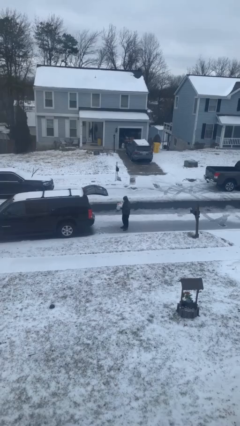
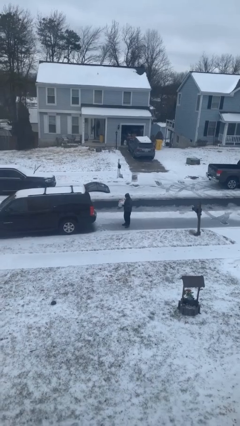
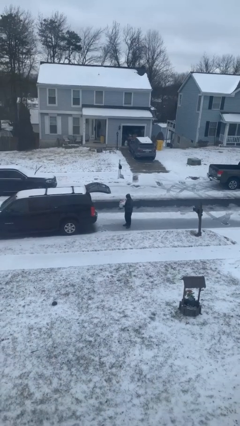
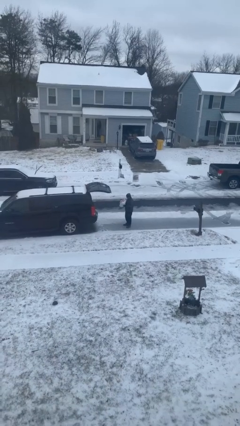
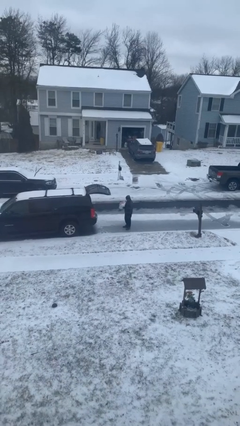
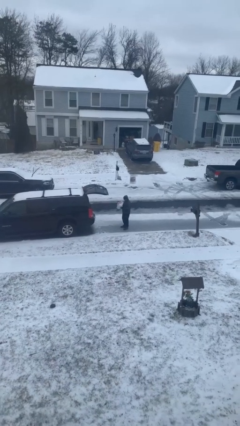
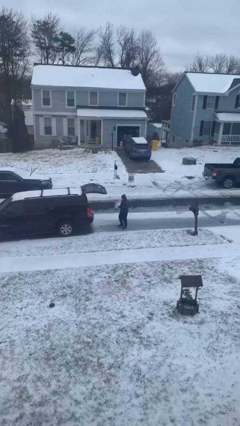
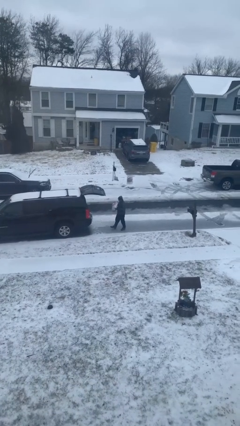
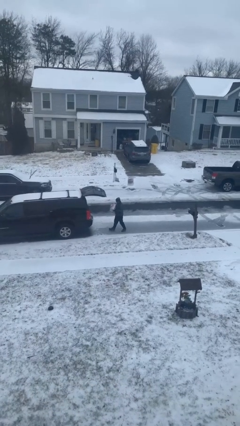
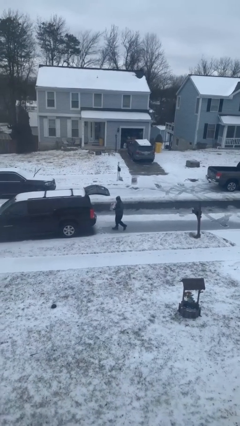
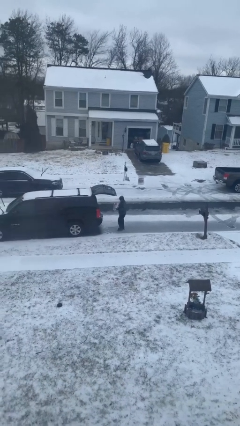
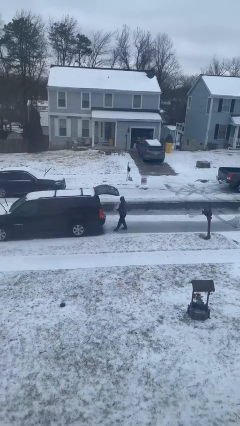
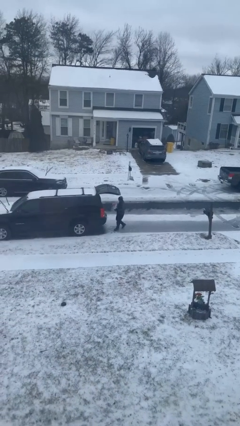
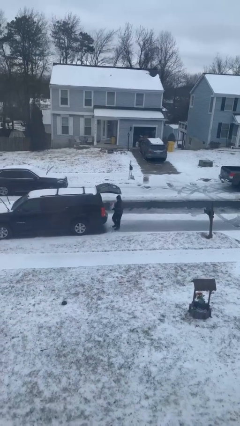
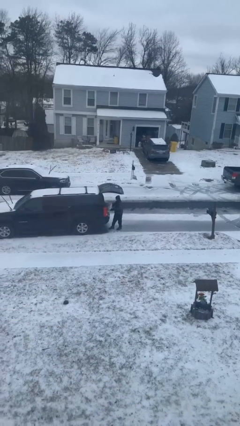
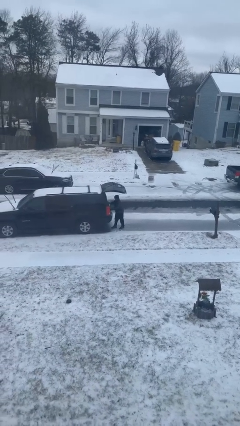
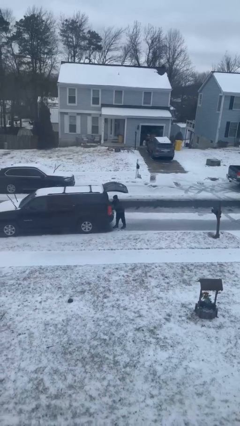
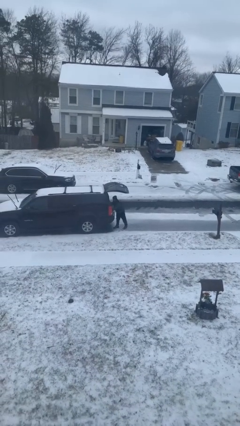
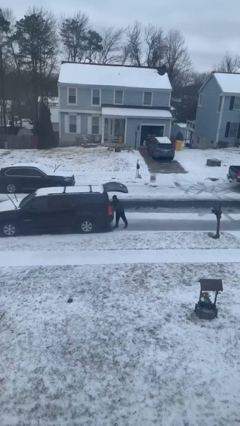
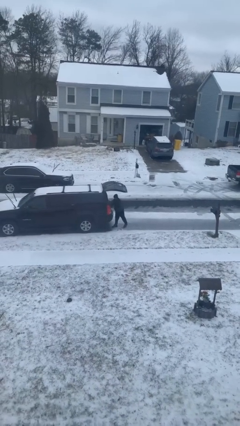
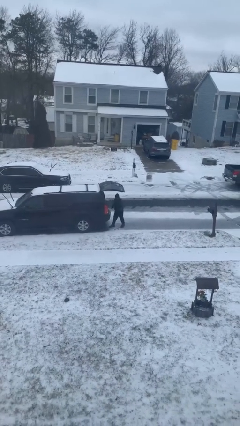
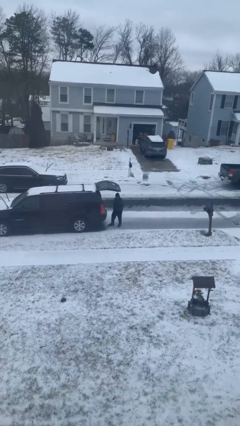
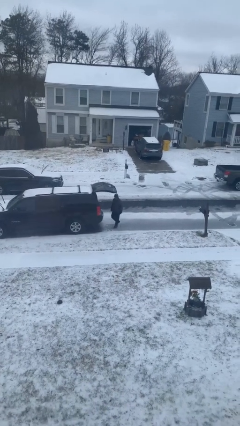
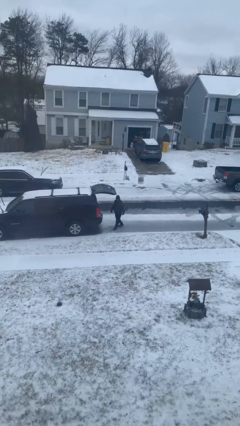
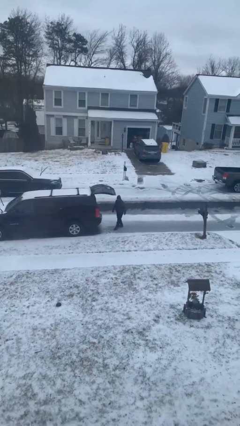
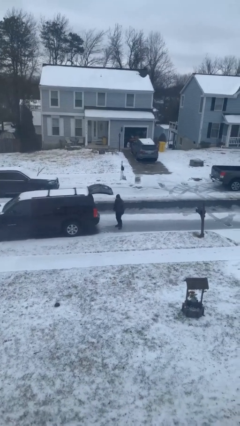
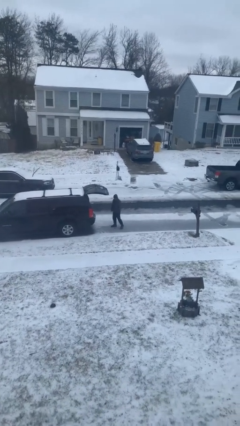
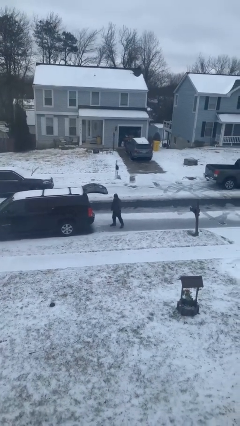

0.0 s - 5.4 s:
person loads car

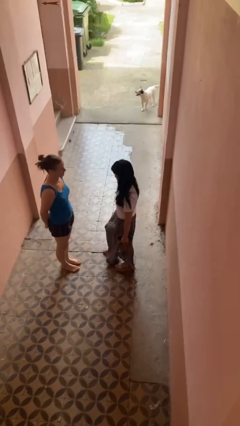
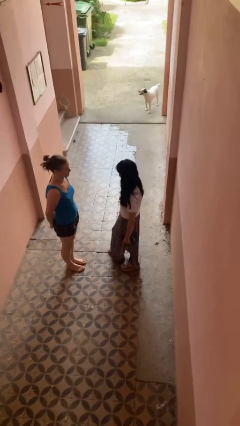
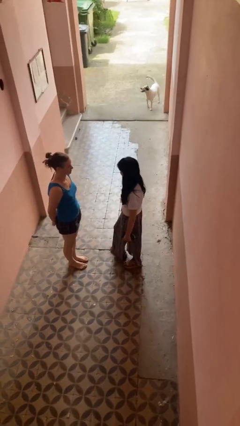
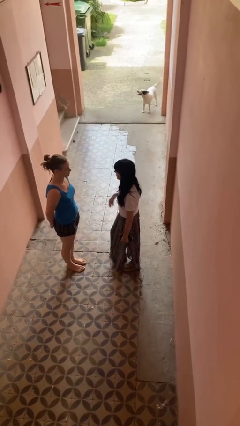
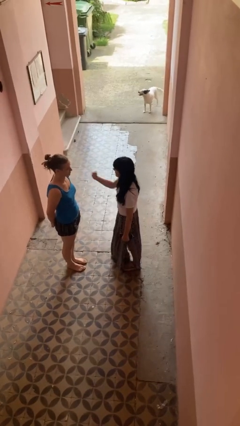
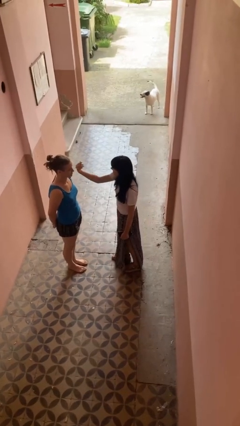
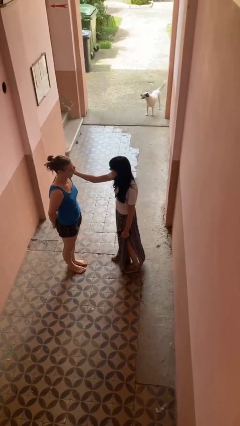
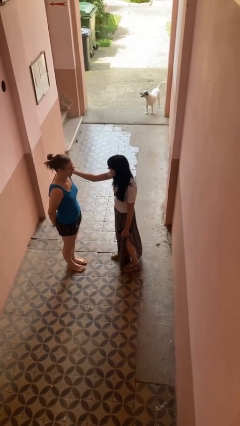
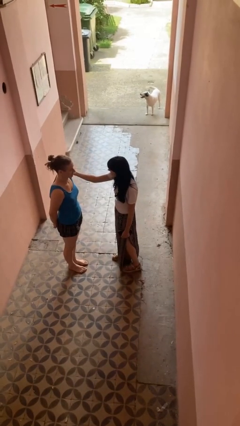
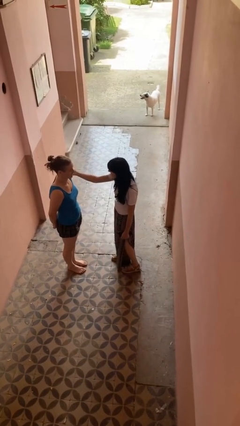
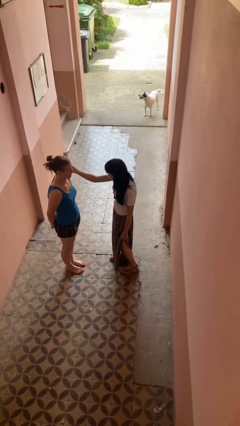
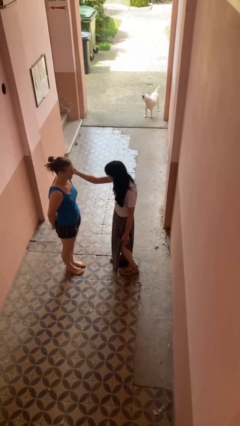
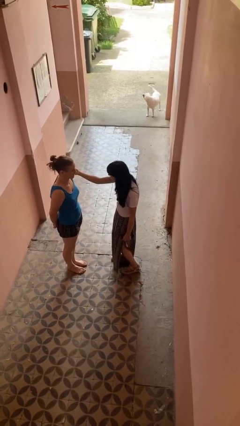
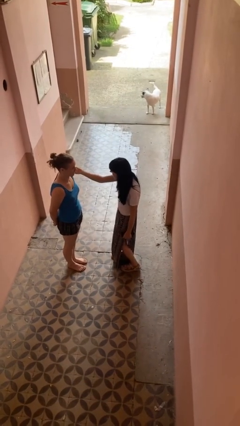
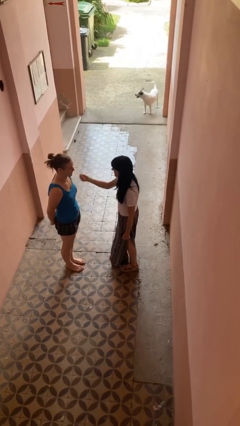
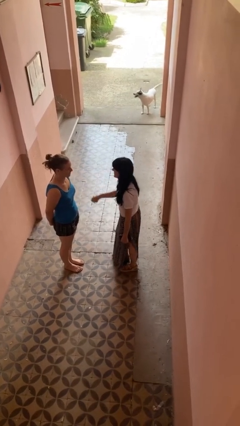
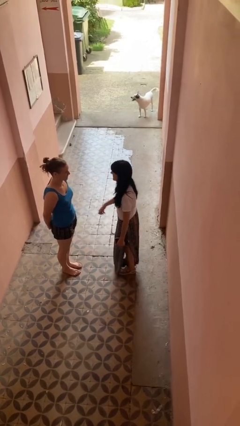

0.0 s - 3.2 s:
person touches face of person

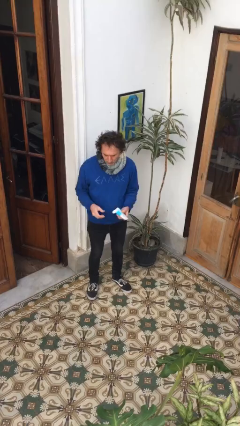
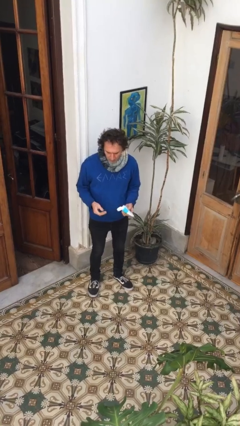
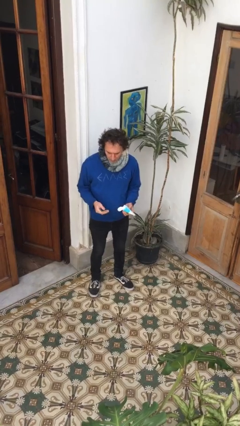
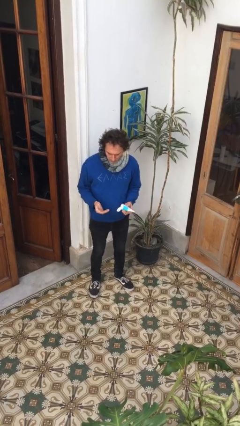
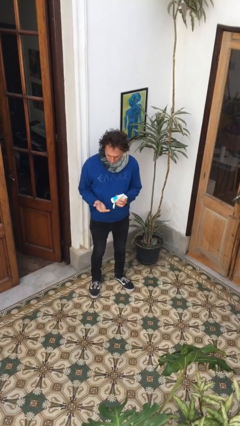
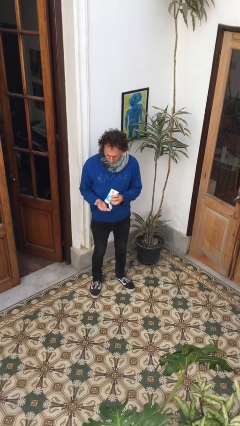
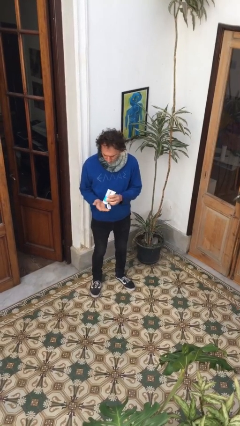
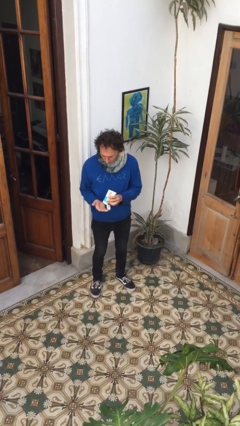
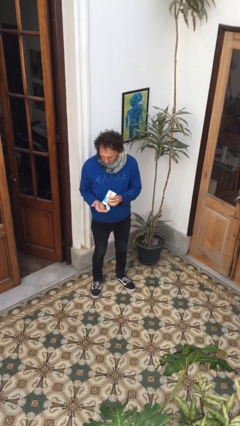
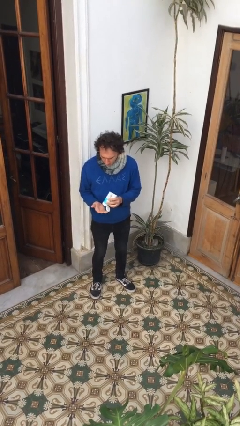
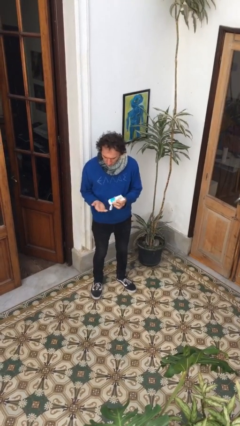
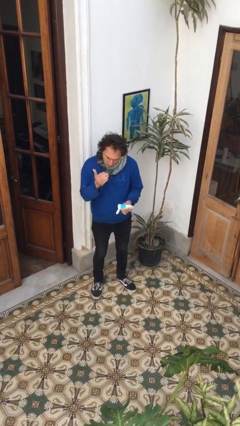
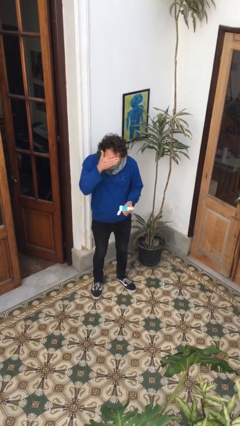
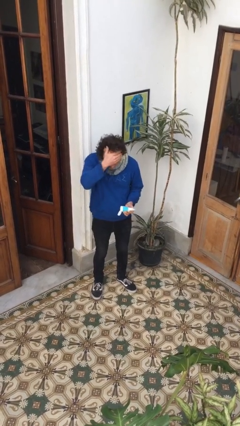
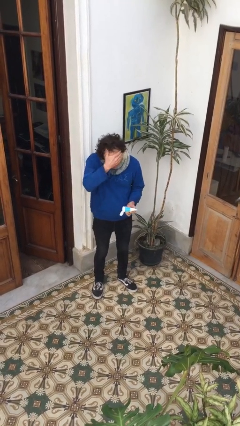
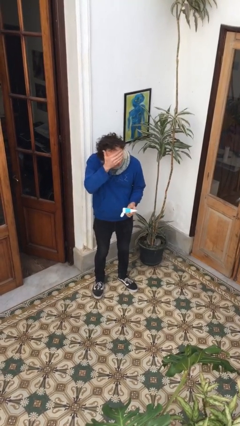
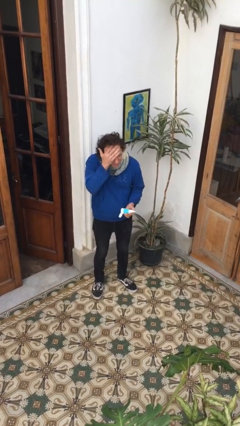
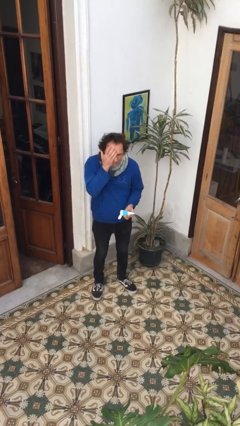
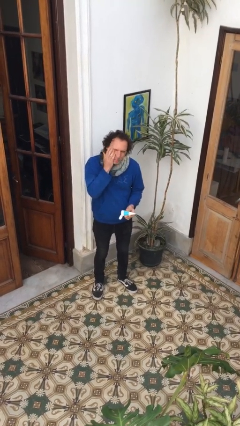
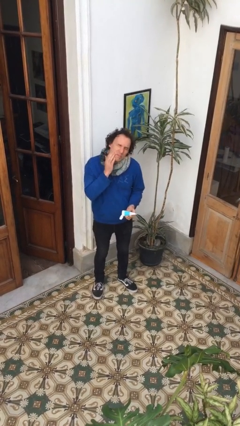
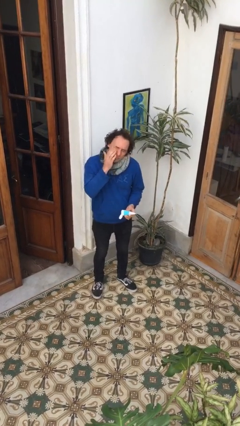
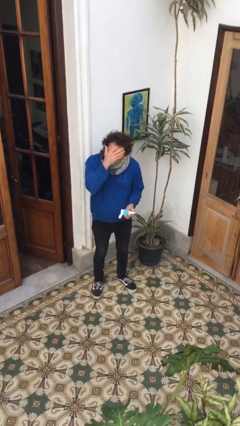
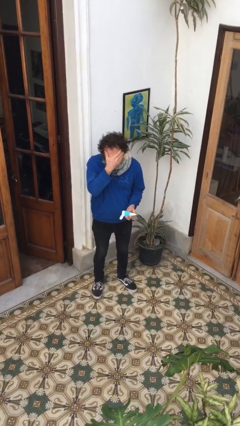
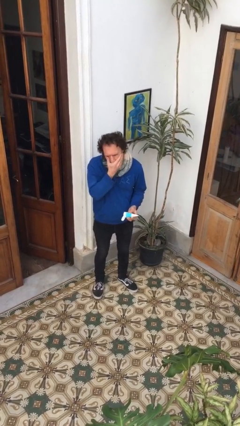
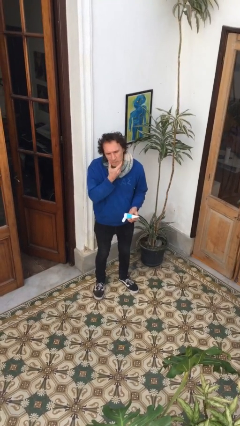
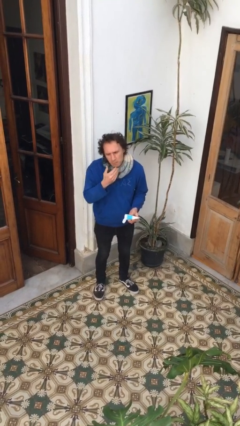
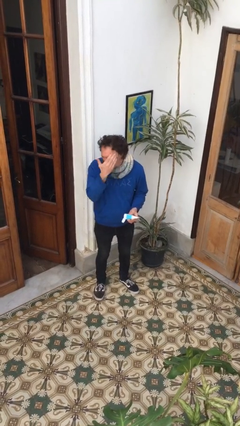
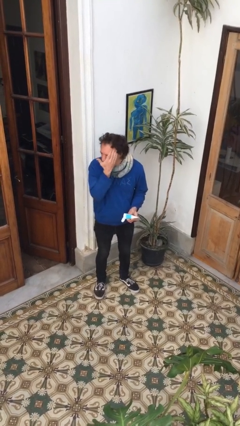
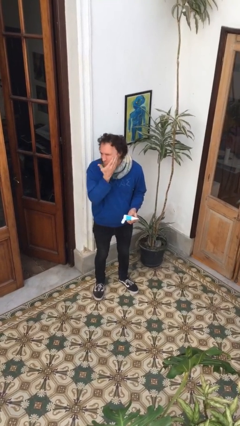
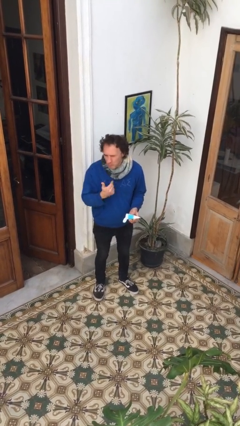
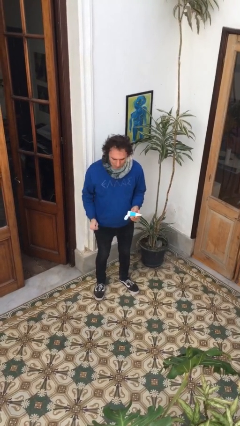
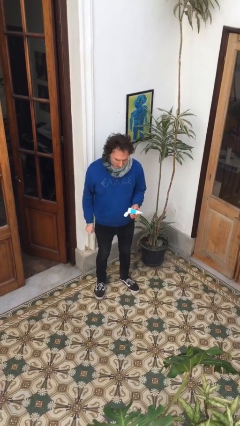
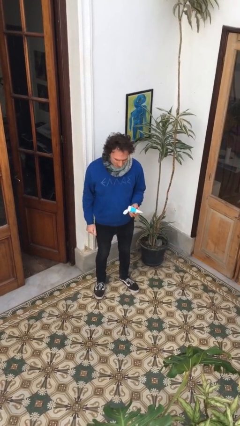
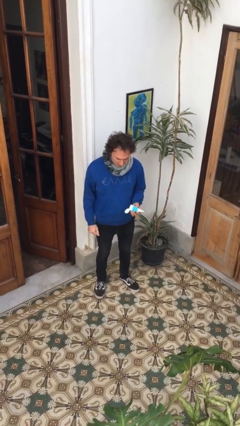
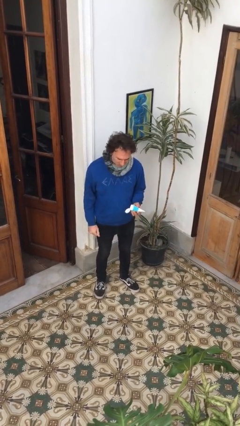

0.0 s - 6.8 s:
person applies facial moisturizer

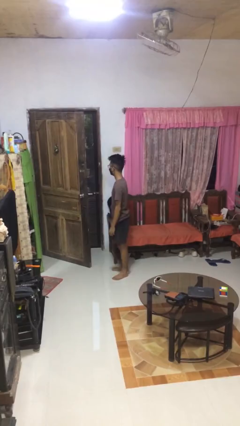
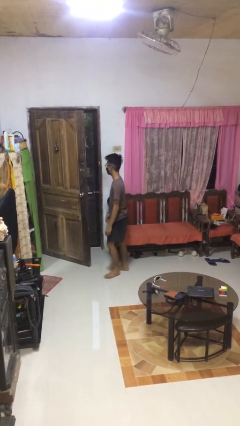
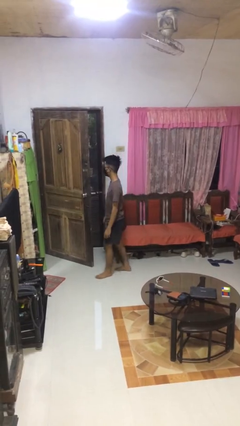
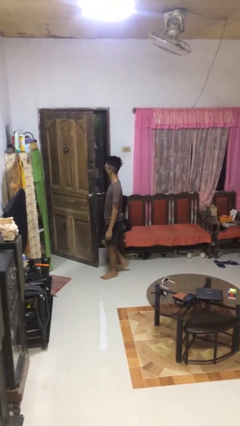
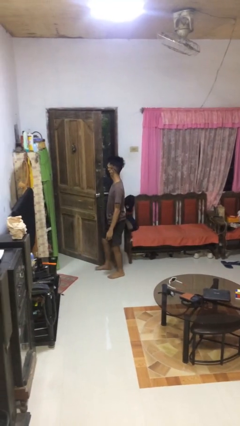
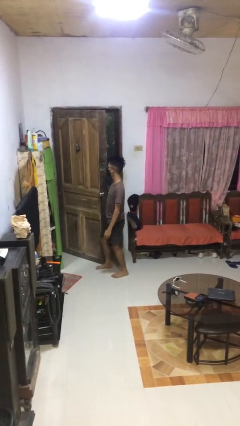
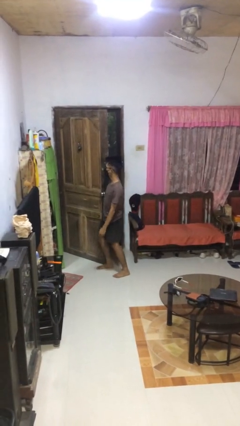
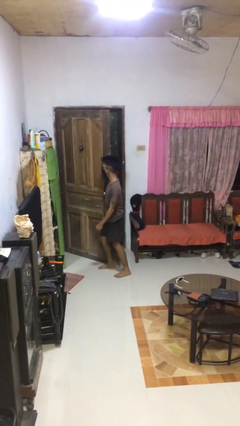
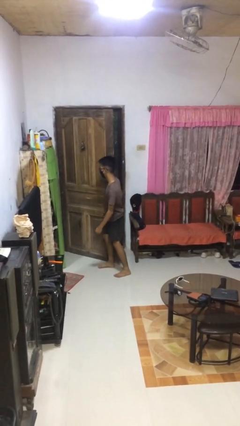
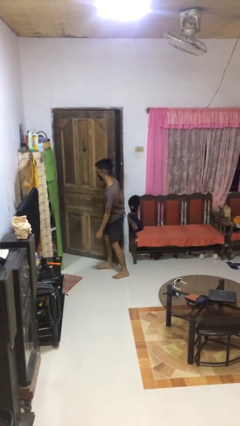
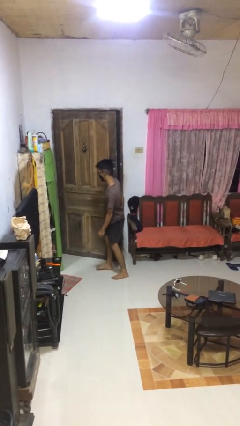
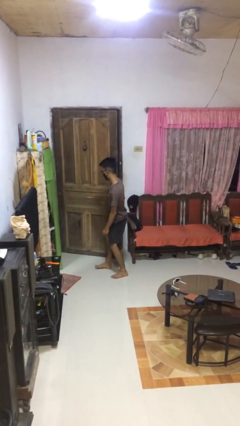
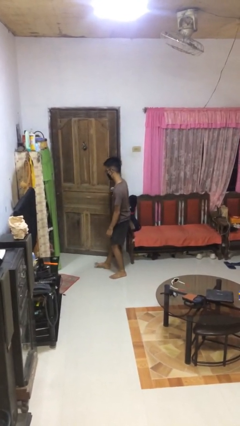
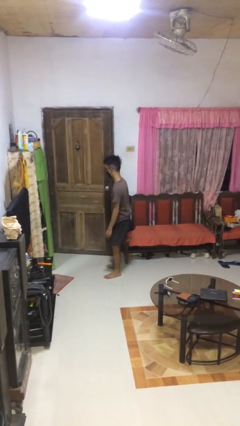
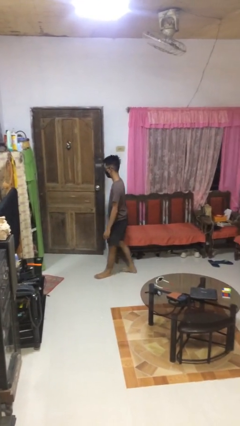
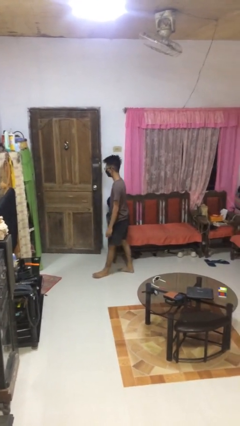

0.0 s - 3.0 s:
person closes door with hip
